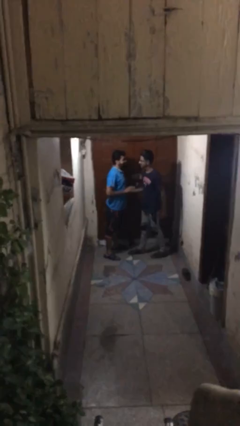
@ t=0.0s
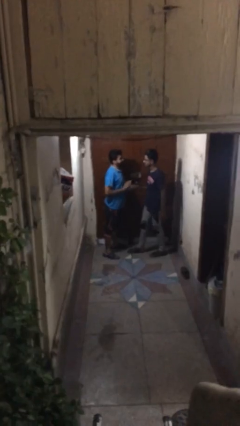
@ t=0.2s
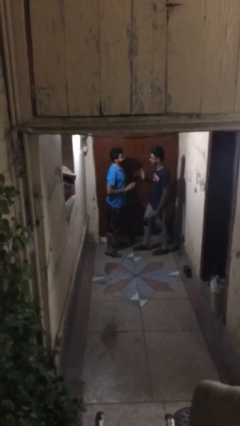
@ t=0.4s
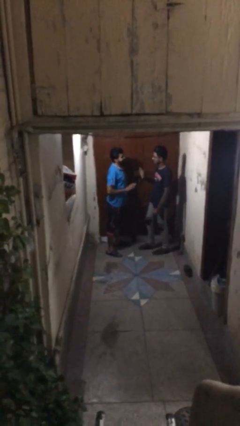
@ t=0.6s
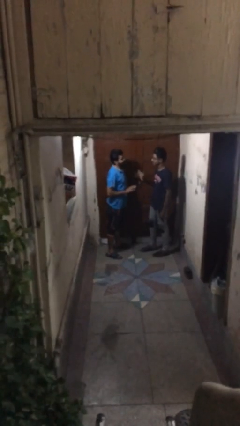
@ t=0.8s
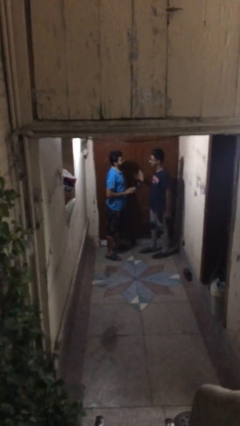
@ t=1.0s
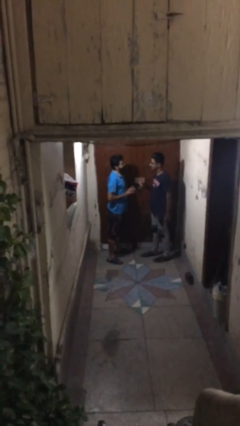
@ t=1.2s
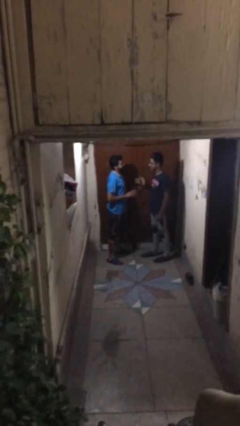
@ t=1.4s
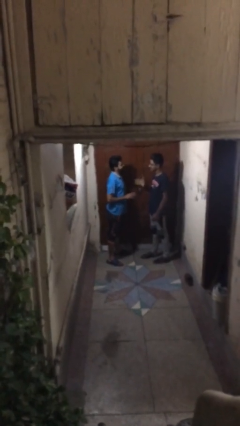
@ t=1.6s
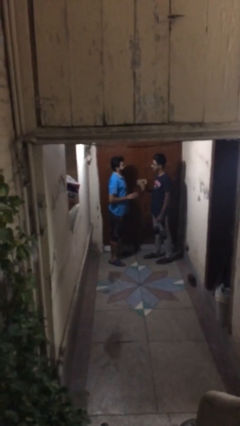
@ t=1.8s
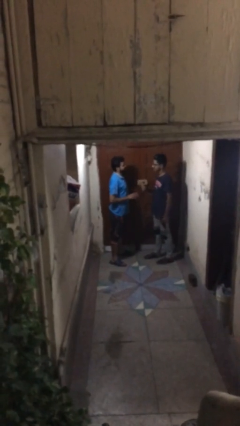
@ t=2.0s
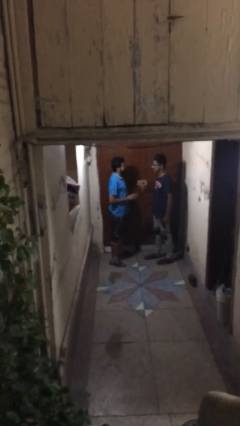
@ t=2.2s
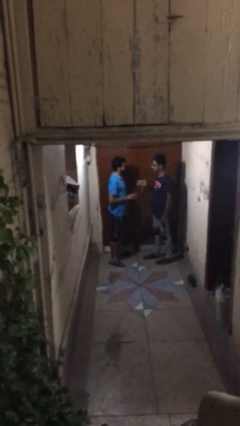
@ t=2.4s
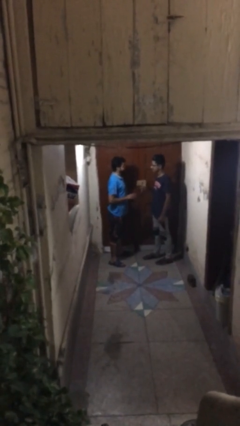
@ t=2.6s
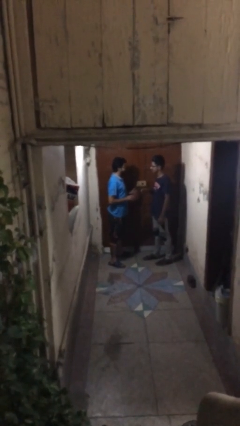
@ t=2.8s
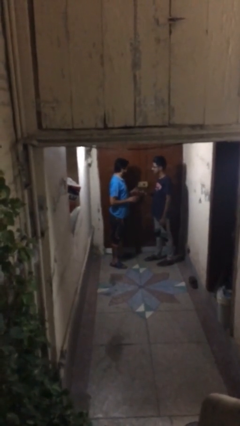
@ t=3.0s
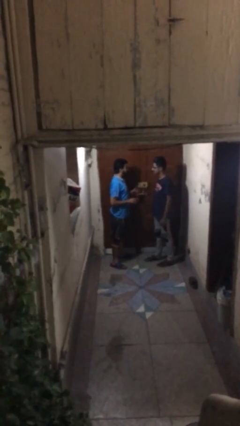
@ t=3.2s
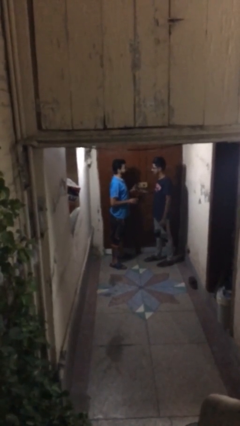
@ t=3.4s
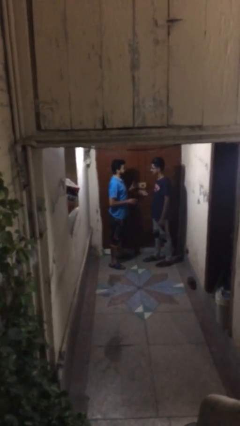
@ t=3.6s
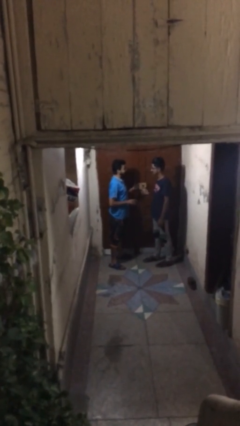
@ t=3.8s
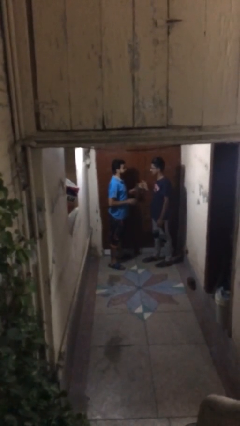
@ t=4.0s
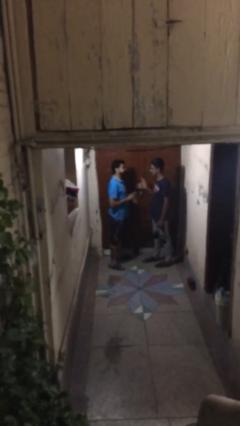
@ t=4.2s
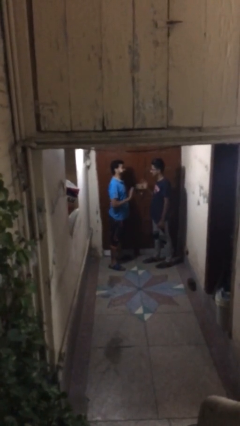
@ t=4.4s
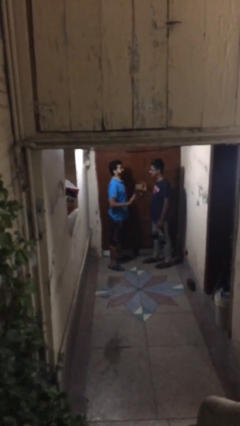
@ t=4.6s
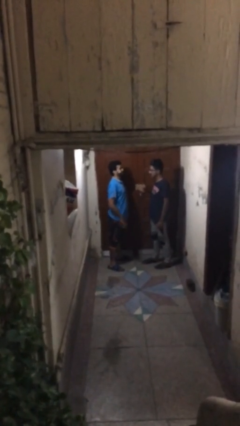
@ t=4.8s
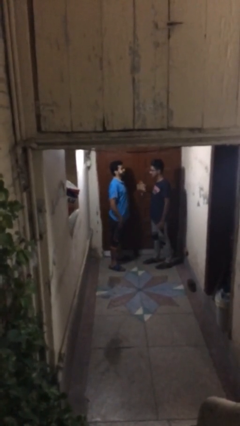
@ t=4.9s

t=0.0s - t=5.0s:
person talks to person

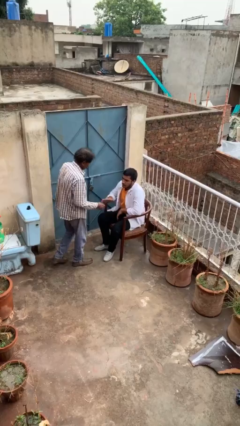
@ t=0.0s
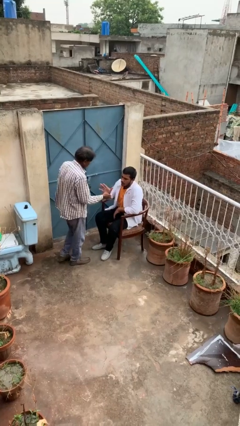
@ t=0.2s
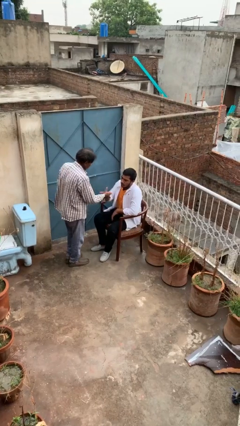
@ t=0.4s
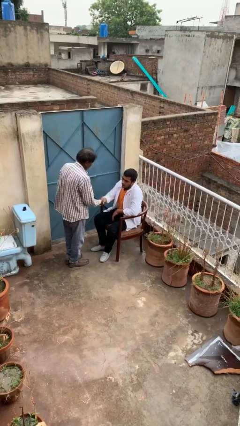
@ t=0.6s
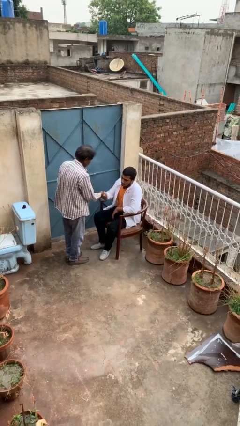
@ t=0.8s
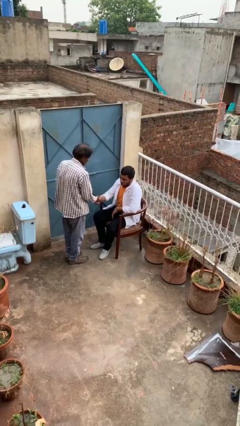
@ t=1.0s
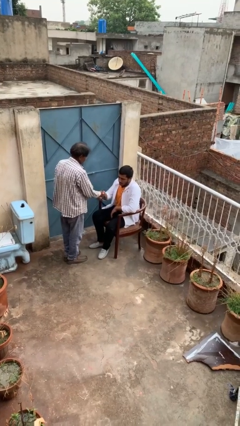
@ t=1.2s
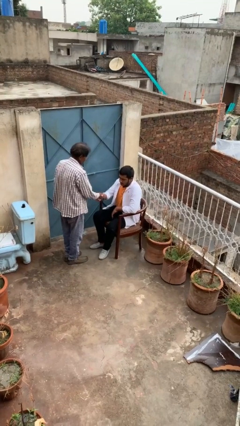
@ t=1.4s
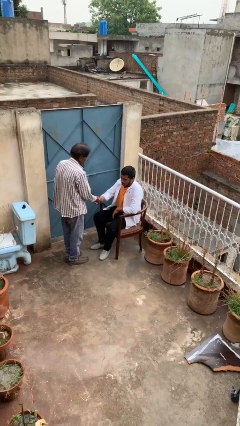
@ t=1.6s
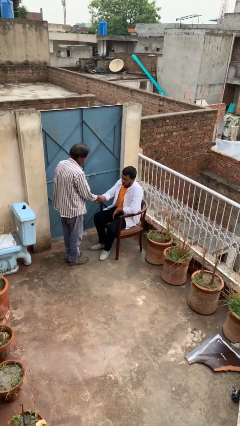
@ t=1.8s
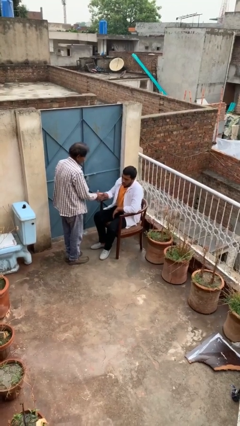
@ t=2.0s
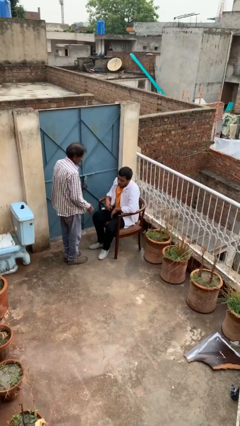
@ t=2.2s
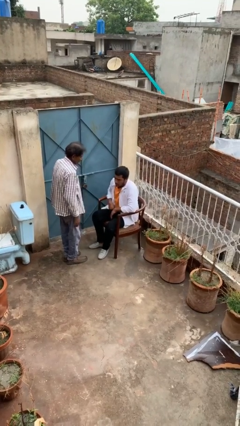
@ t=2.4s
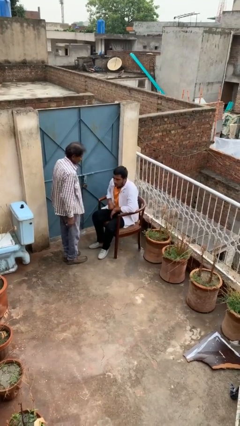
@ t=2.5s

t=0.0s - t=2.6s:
person shakes hand

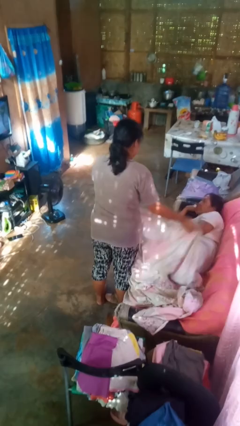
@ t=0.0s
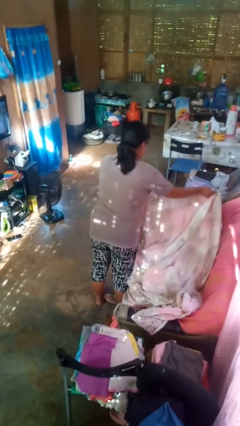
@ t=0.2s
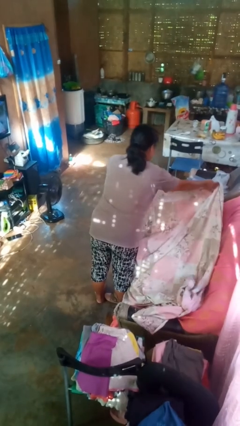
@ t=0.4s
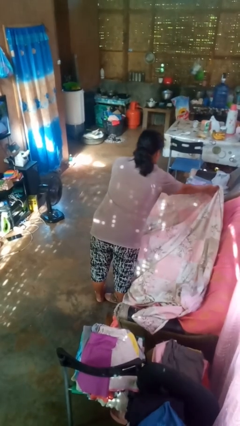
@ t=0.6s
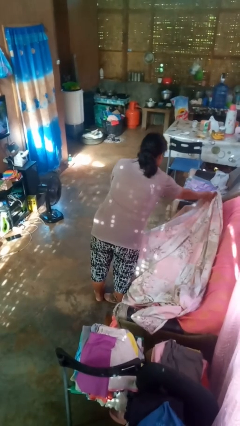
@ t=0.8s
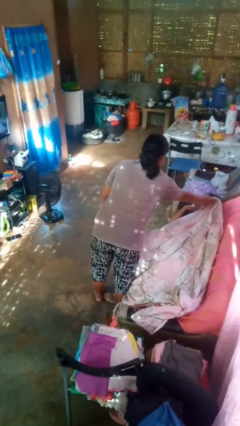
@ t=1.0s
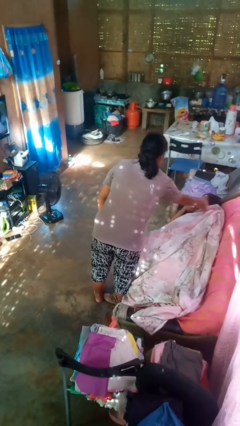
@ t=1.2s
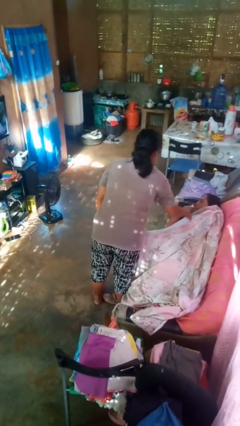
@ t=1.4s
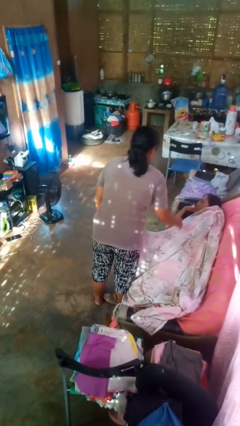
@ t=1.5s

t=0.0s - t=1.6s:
person covers friend with blanket

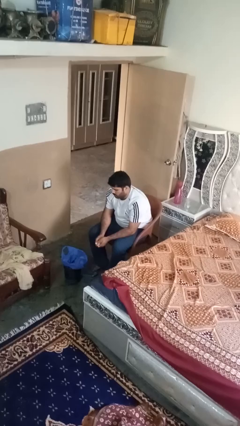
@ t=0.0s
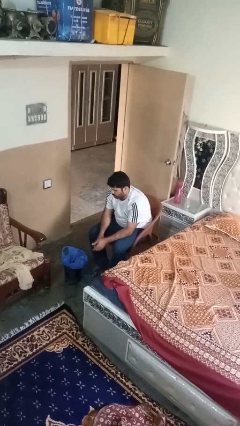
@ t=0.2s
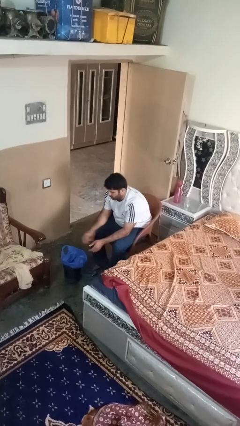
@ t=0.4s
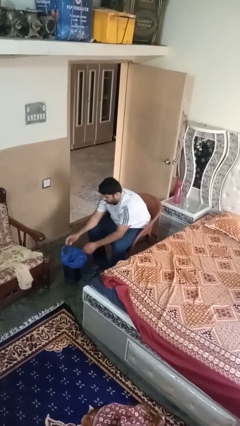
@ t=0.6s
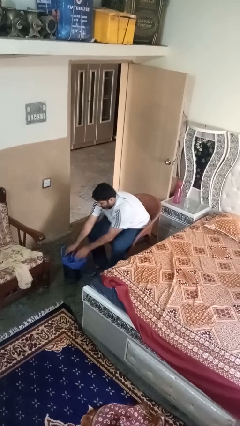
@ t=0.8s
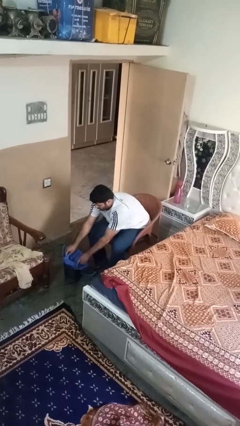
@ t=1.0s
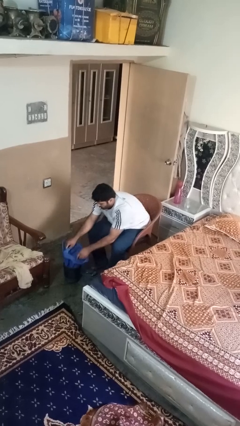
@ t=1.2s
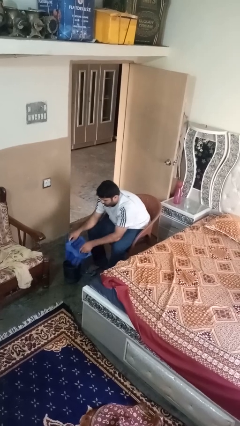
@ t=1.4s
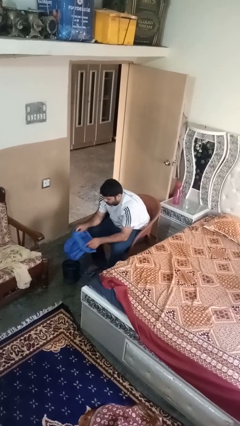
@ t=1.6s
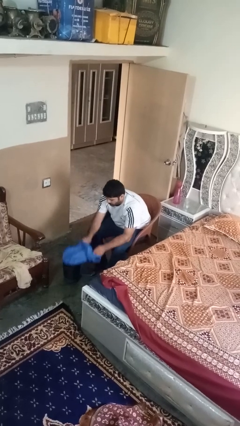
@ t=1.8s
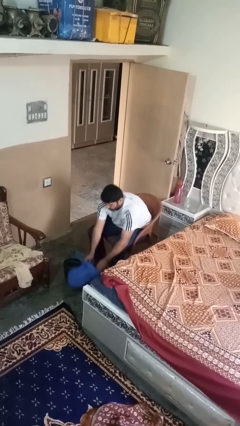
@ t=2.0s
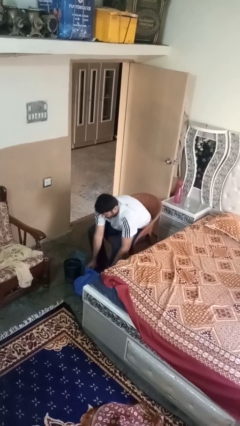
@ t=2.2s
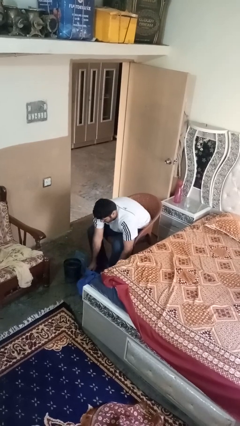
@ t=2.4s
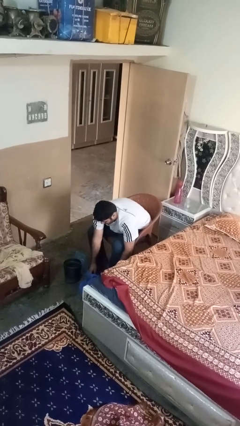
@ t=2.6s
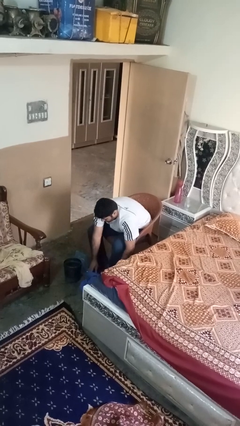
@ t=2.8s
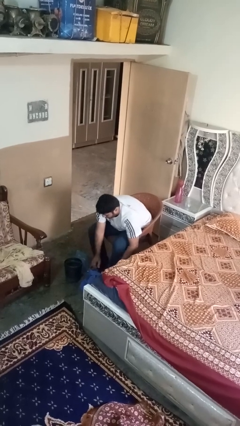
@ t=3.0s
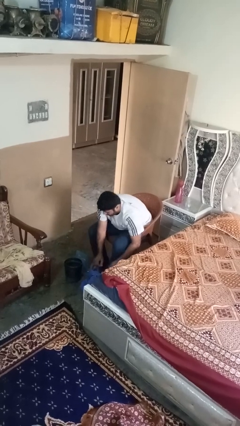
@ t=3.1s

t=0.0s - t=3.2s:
person removes trashbag from trashcan

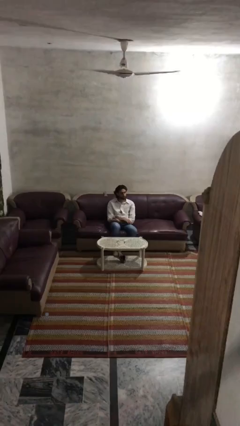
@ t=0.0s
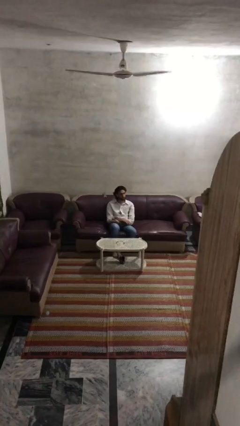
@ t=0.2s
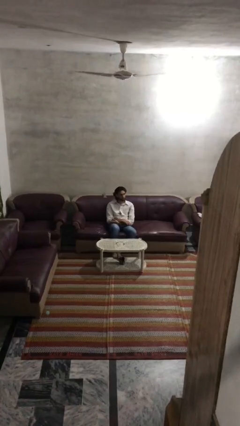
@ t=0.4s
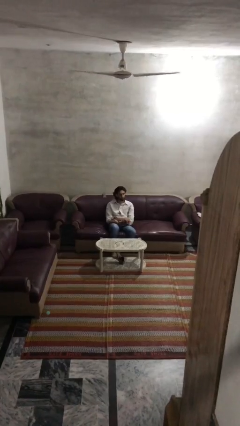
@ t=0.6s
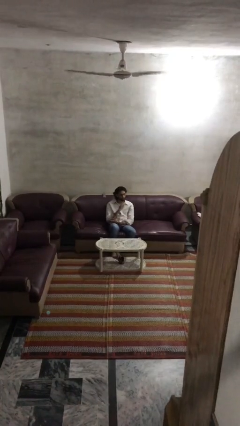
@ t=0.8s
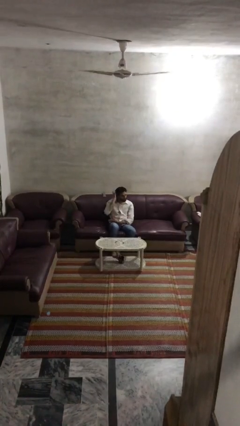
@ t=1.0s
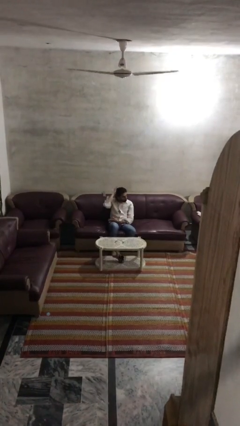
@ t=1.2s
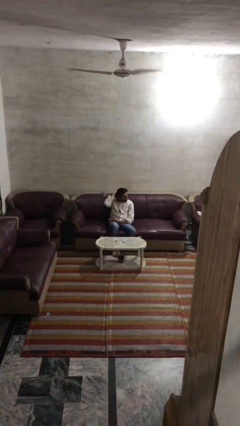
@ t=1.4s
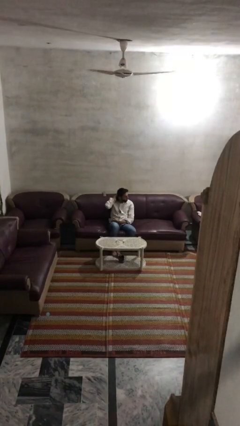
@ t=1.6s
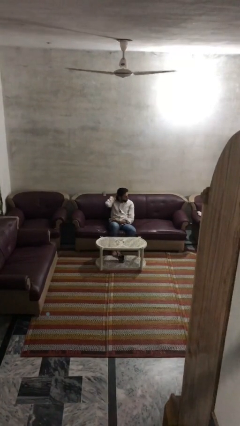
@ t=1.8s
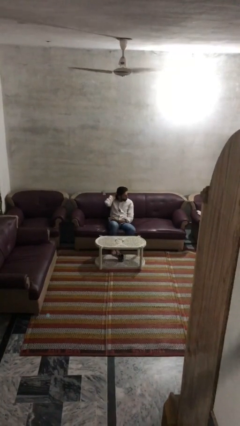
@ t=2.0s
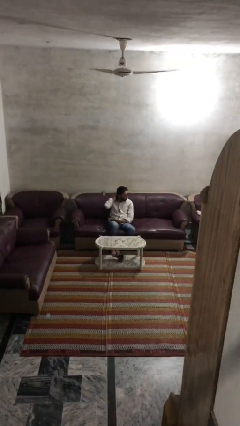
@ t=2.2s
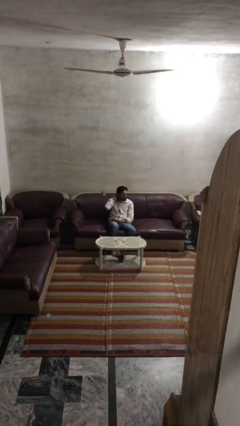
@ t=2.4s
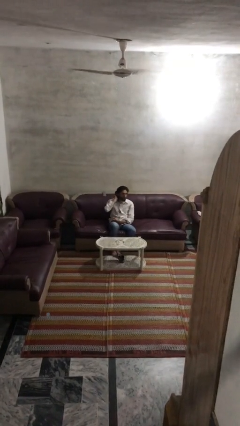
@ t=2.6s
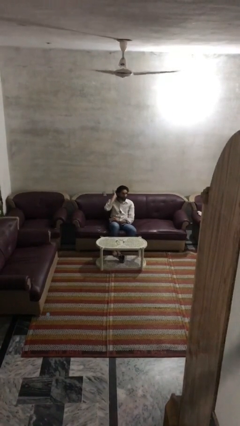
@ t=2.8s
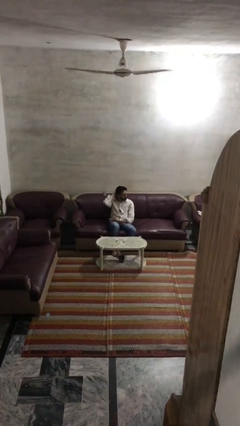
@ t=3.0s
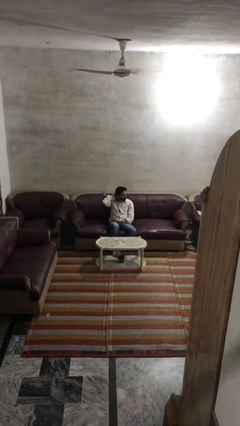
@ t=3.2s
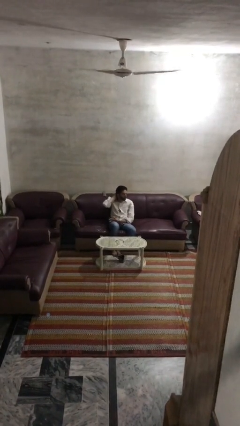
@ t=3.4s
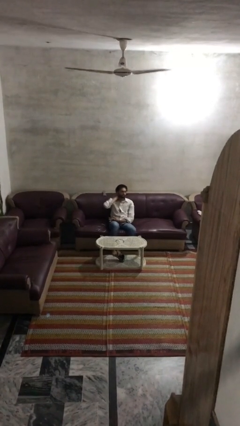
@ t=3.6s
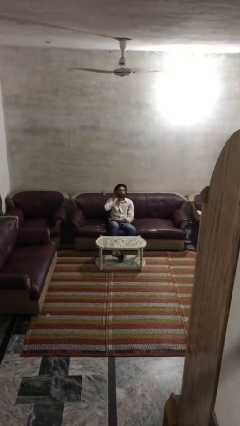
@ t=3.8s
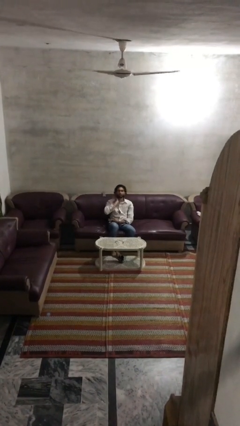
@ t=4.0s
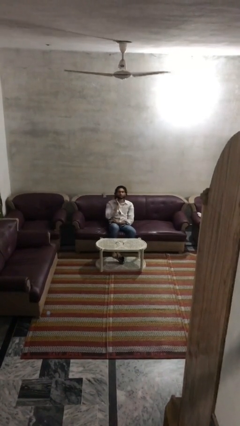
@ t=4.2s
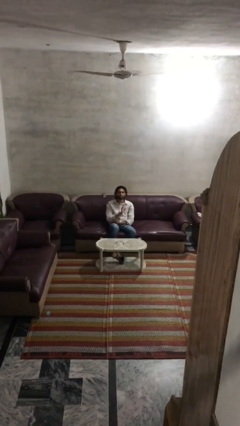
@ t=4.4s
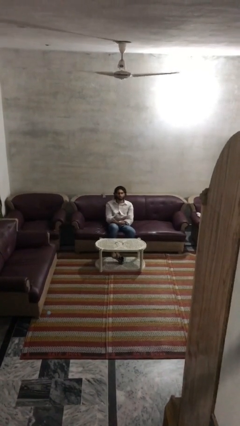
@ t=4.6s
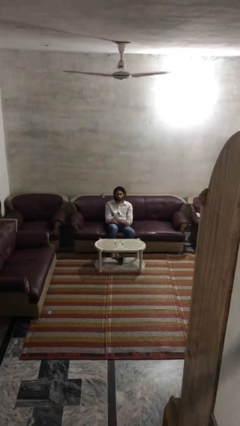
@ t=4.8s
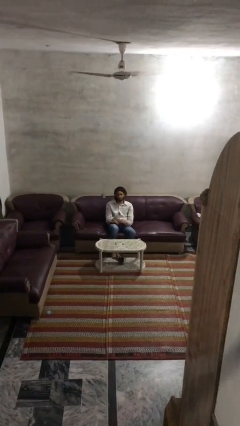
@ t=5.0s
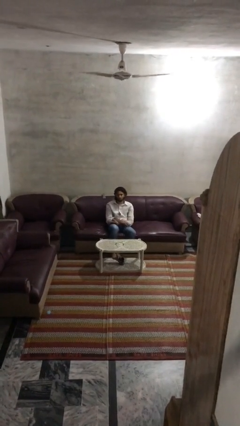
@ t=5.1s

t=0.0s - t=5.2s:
person strokes hair
